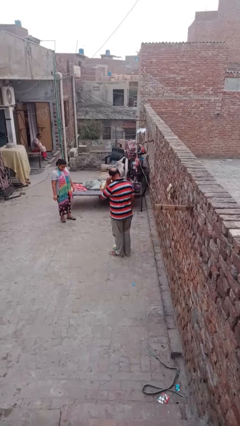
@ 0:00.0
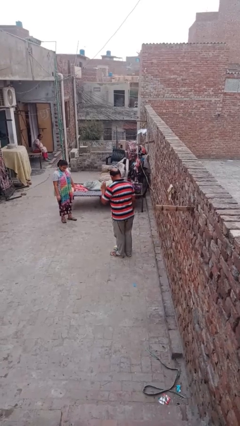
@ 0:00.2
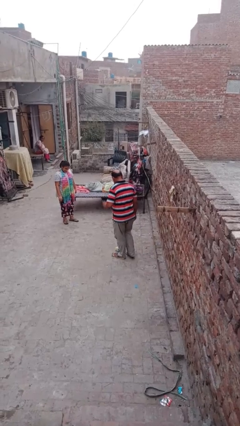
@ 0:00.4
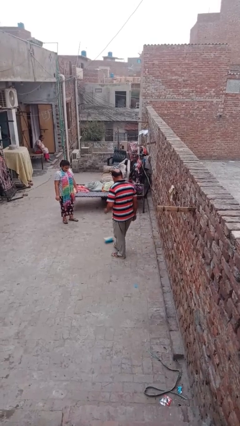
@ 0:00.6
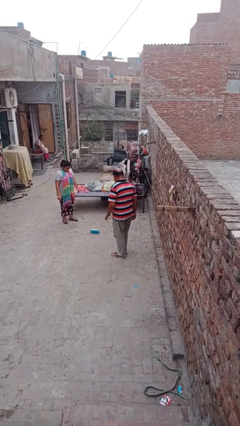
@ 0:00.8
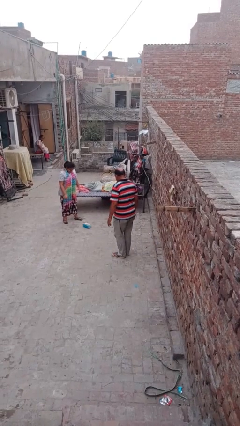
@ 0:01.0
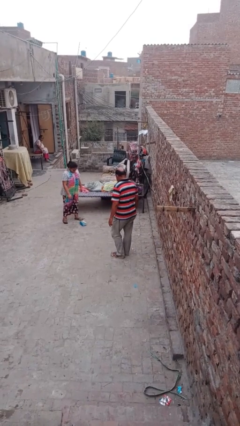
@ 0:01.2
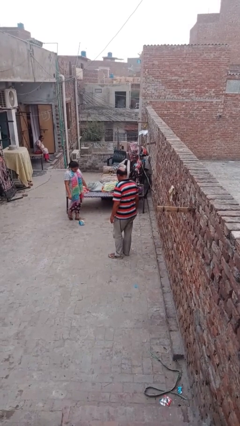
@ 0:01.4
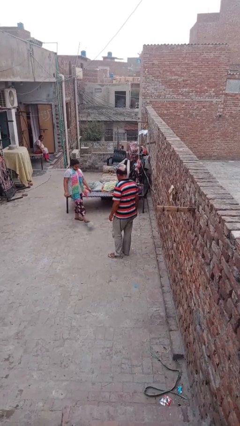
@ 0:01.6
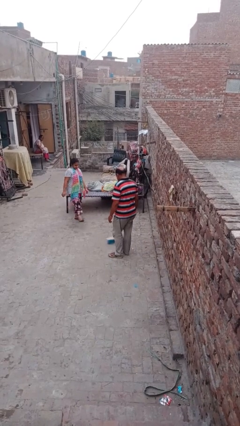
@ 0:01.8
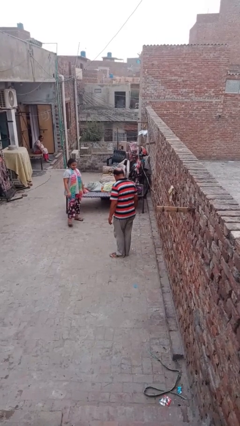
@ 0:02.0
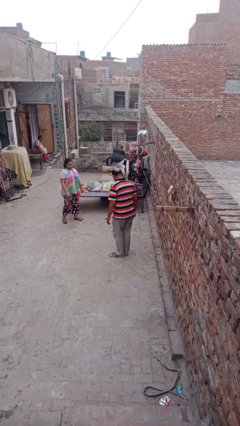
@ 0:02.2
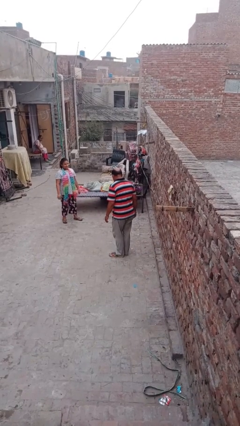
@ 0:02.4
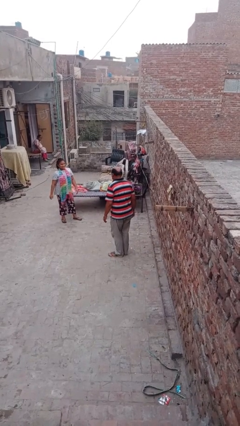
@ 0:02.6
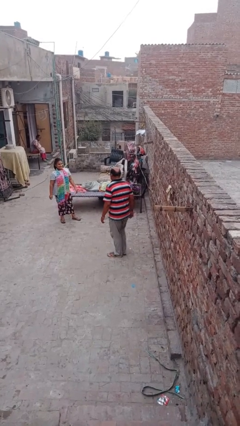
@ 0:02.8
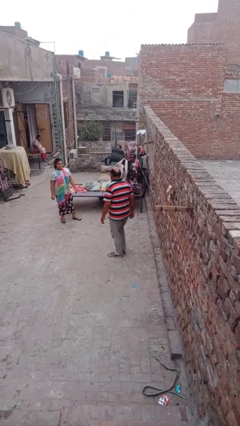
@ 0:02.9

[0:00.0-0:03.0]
person kicks object to person

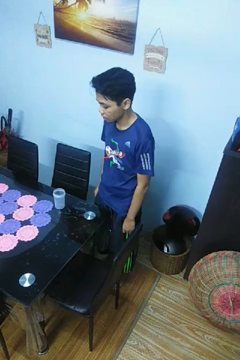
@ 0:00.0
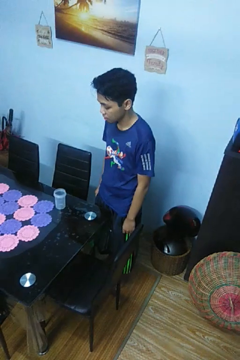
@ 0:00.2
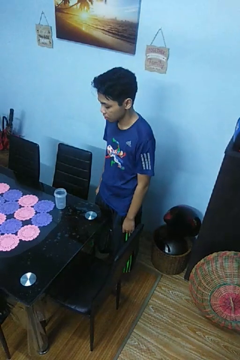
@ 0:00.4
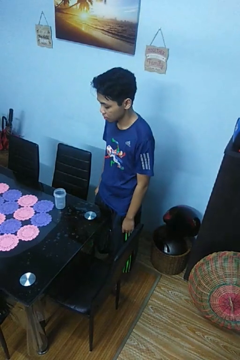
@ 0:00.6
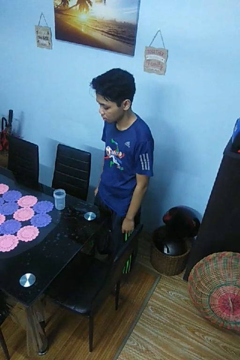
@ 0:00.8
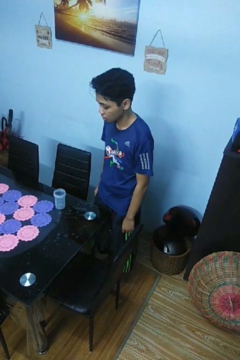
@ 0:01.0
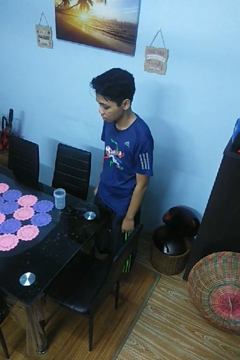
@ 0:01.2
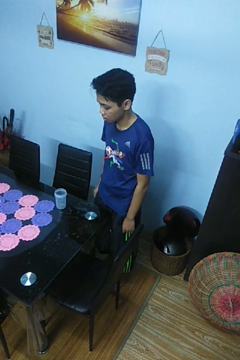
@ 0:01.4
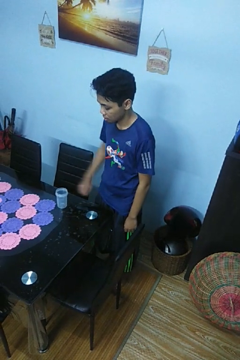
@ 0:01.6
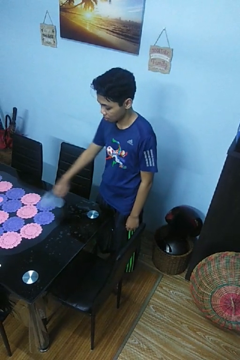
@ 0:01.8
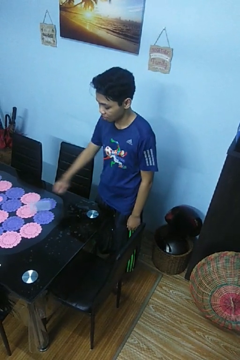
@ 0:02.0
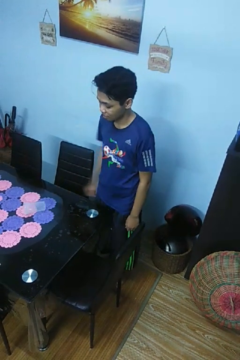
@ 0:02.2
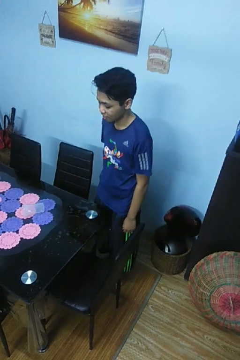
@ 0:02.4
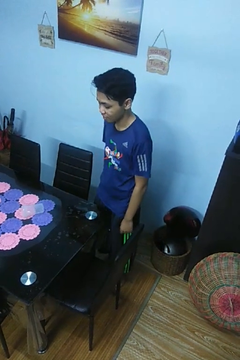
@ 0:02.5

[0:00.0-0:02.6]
person knocks over glass

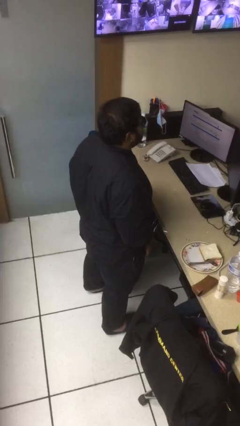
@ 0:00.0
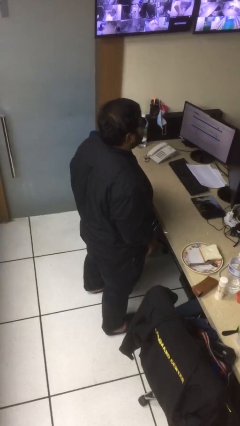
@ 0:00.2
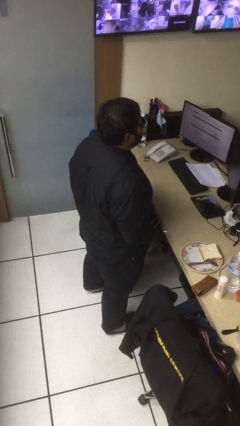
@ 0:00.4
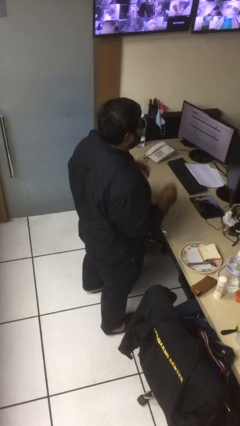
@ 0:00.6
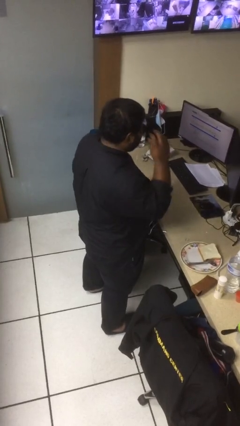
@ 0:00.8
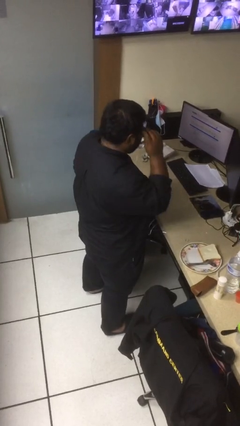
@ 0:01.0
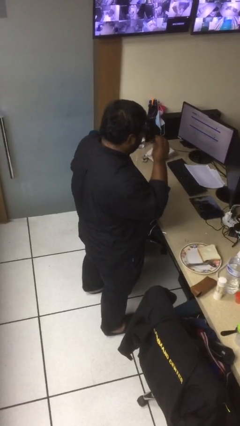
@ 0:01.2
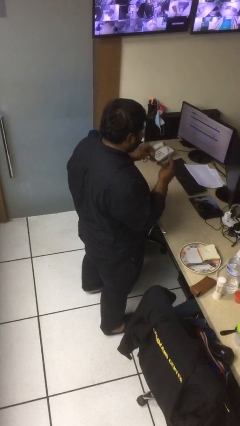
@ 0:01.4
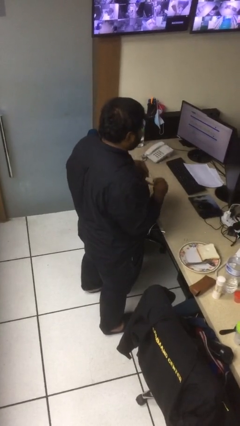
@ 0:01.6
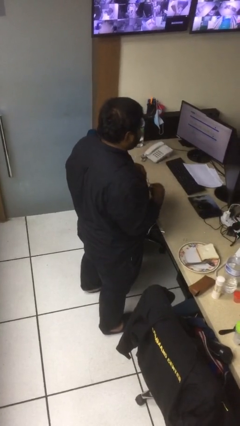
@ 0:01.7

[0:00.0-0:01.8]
person takes off sunglasses

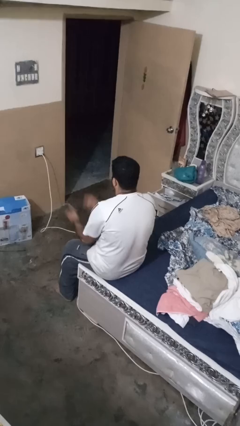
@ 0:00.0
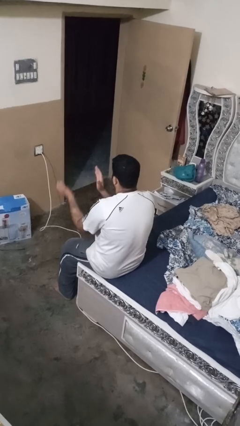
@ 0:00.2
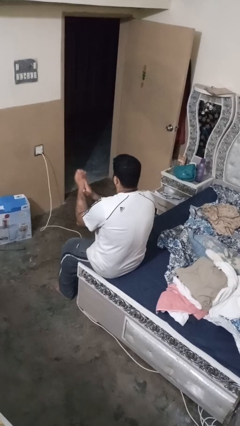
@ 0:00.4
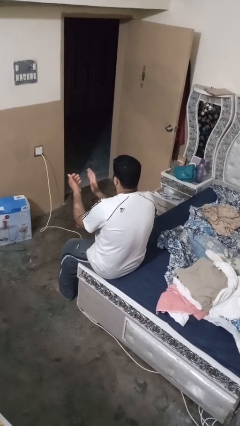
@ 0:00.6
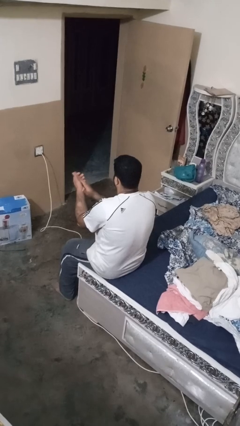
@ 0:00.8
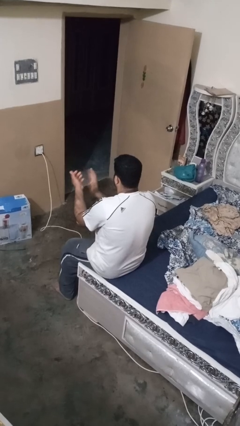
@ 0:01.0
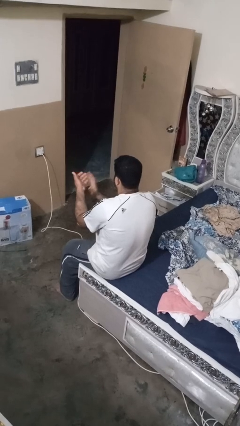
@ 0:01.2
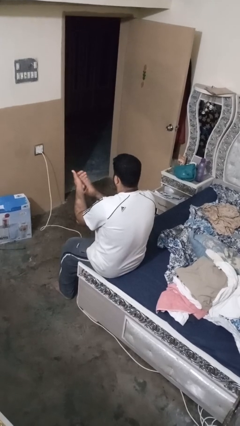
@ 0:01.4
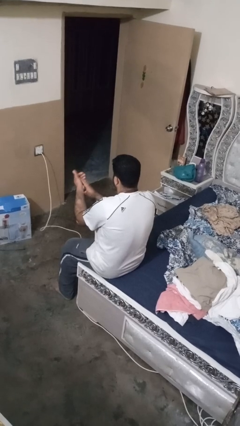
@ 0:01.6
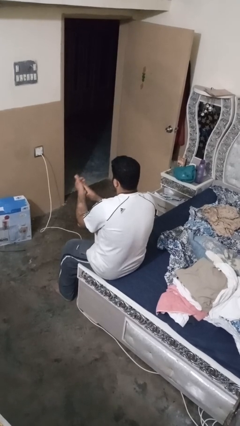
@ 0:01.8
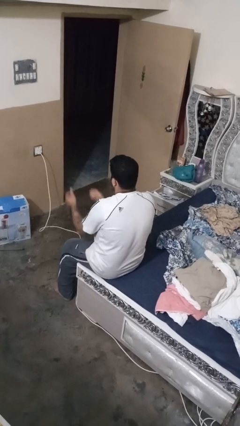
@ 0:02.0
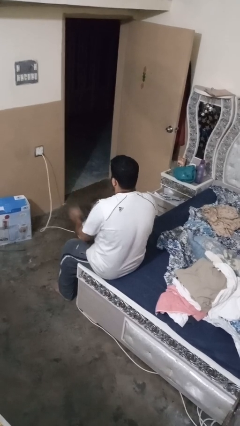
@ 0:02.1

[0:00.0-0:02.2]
person claps hands

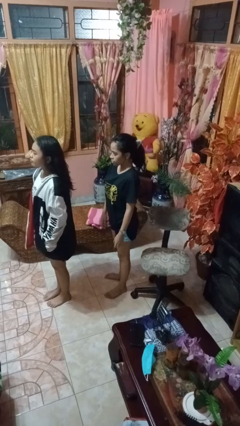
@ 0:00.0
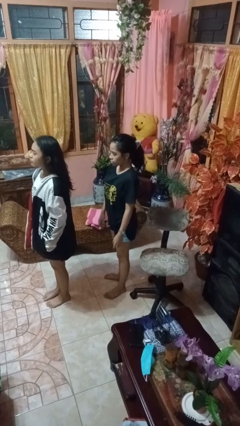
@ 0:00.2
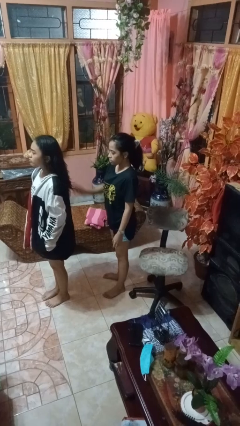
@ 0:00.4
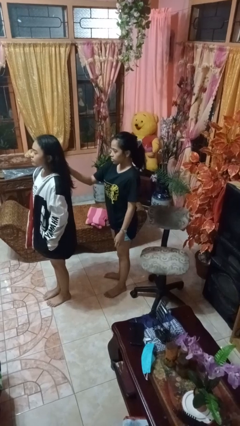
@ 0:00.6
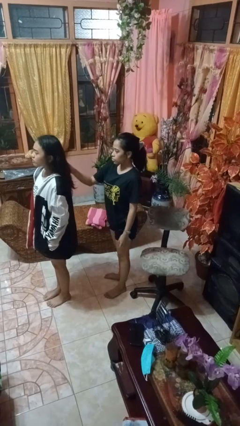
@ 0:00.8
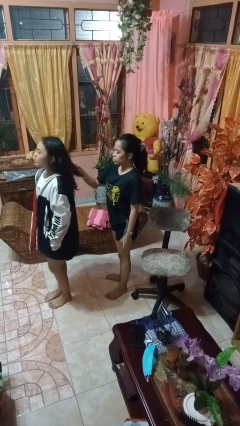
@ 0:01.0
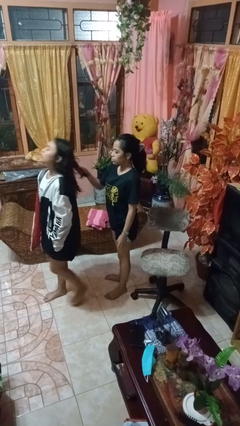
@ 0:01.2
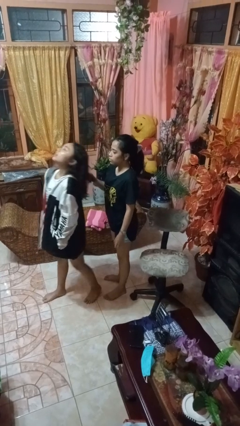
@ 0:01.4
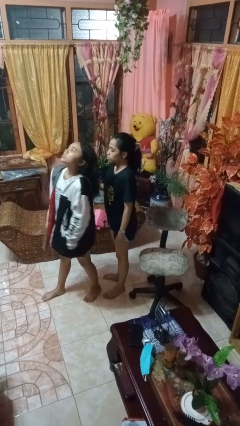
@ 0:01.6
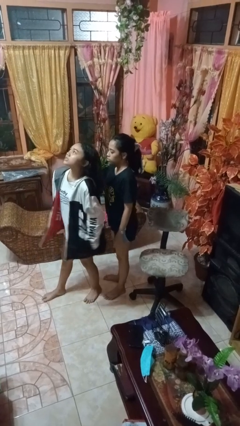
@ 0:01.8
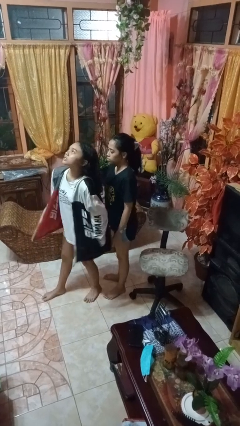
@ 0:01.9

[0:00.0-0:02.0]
person grabs person by hair

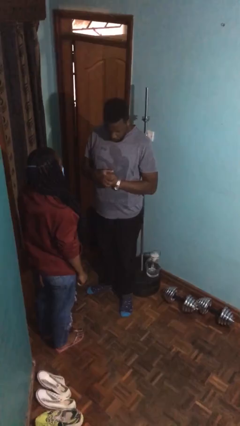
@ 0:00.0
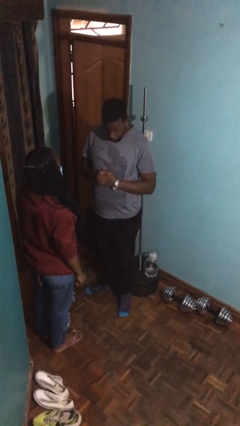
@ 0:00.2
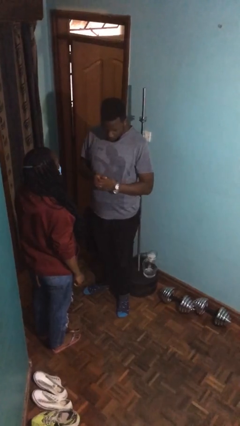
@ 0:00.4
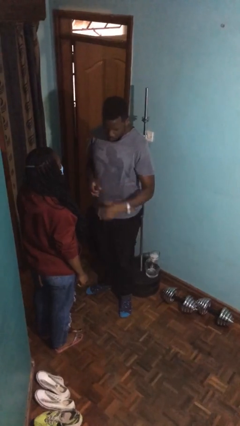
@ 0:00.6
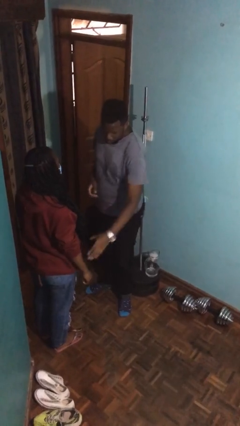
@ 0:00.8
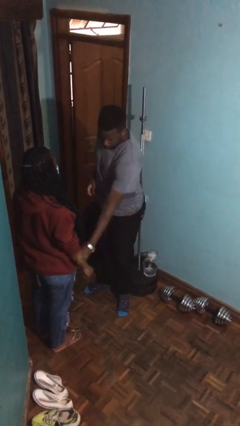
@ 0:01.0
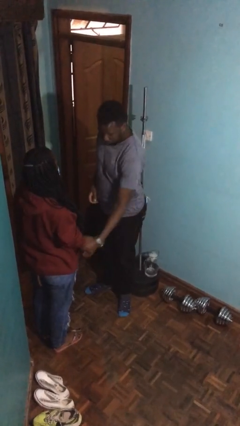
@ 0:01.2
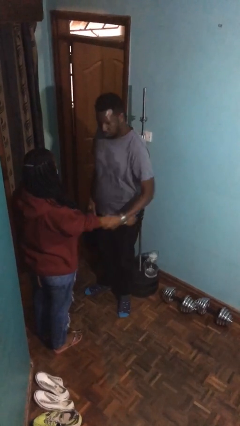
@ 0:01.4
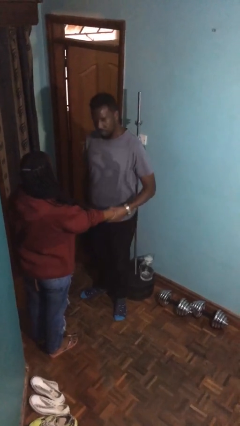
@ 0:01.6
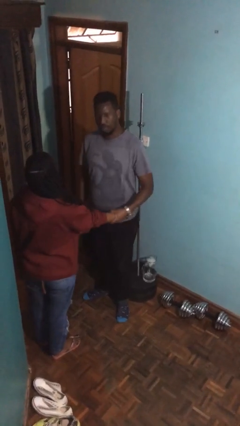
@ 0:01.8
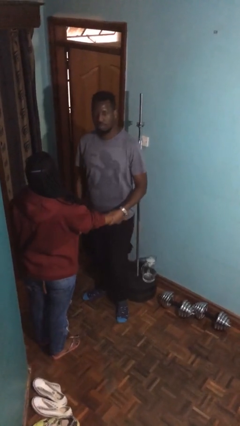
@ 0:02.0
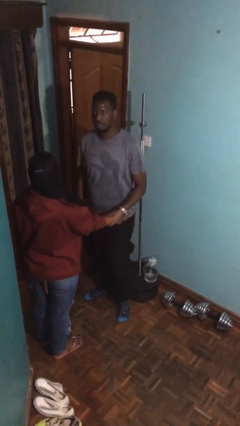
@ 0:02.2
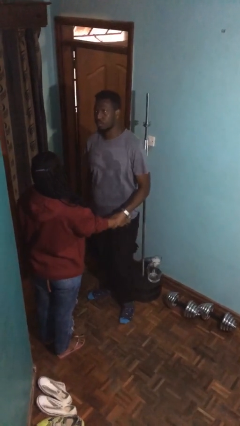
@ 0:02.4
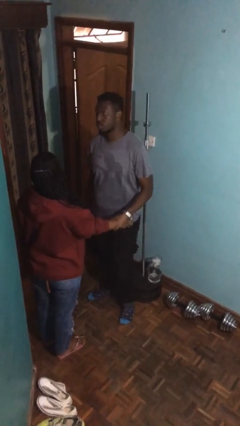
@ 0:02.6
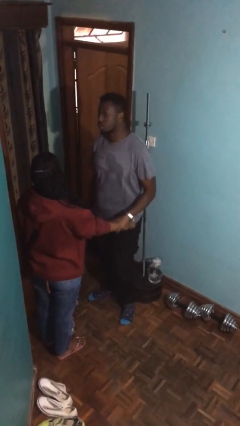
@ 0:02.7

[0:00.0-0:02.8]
person grabs person by forearm

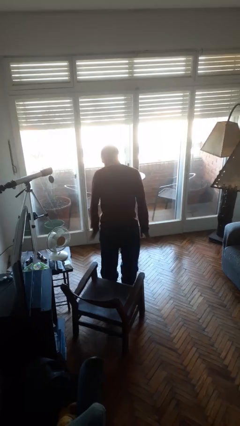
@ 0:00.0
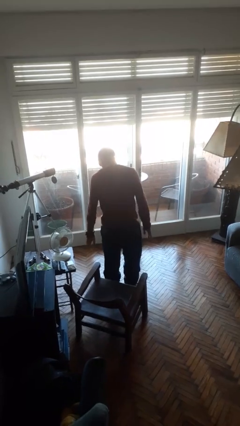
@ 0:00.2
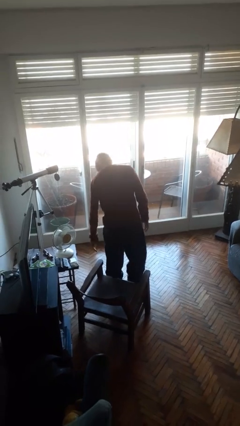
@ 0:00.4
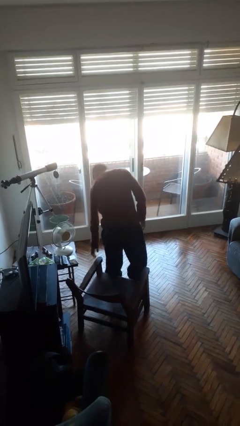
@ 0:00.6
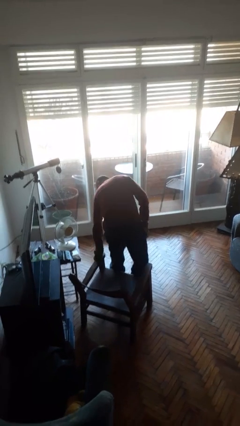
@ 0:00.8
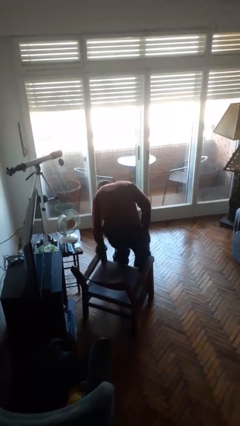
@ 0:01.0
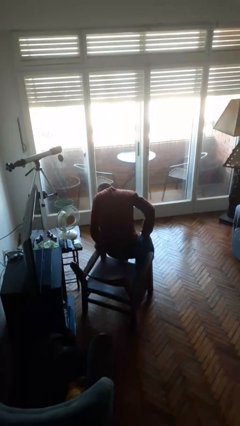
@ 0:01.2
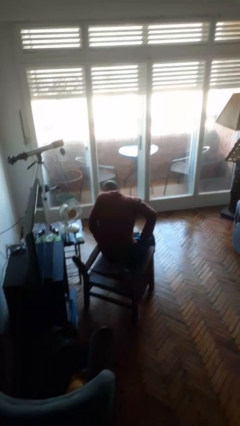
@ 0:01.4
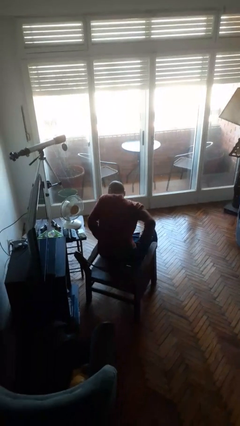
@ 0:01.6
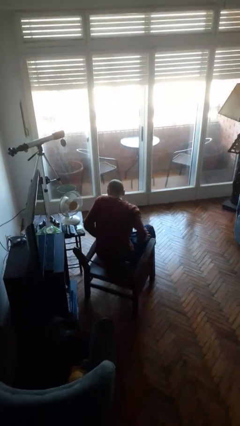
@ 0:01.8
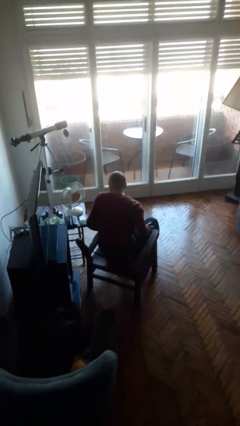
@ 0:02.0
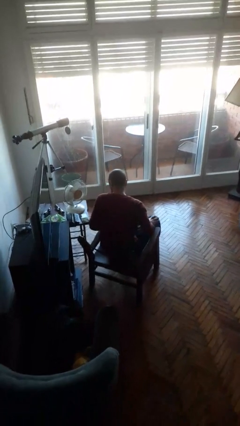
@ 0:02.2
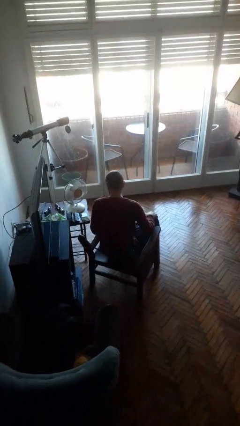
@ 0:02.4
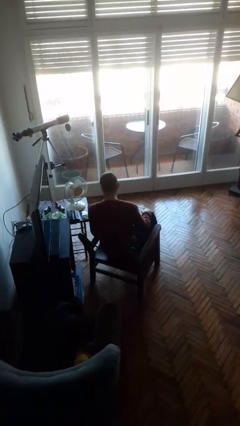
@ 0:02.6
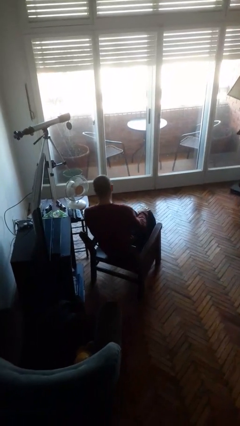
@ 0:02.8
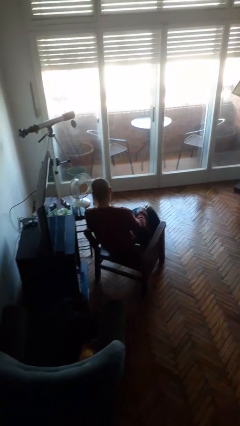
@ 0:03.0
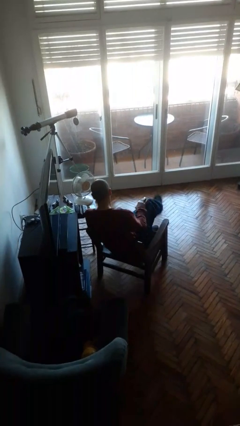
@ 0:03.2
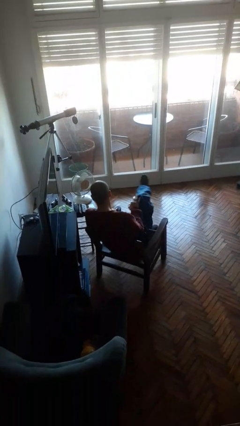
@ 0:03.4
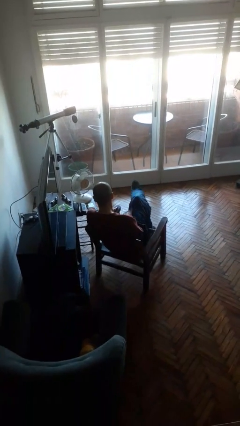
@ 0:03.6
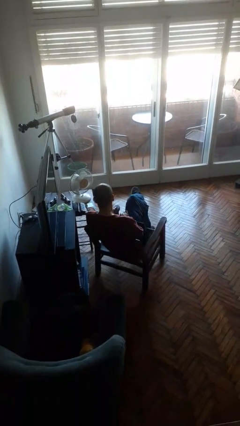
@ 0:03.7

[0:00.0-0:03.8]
person sits down
